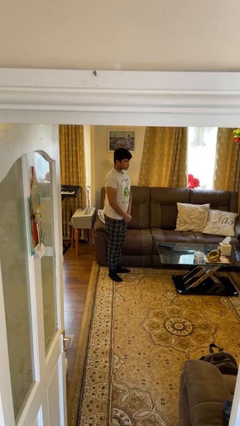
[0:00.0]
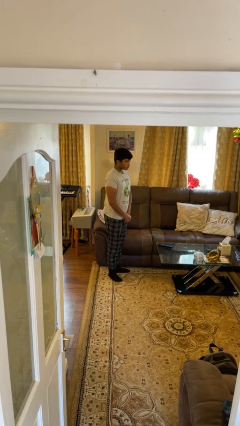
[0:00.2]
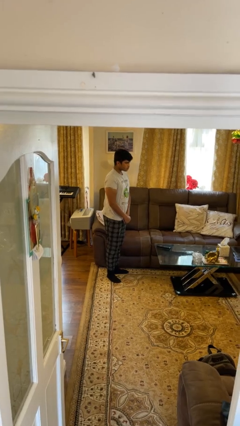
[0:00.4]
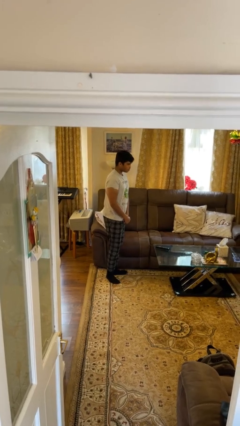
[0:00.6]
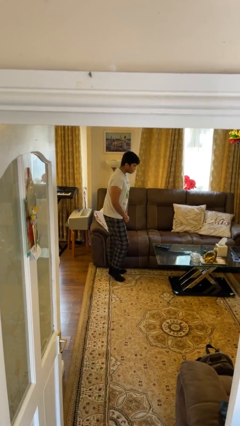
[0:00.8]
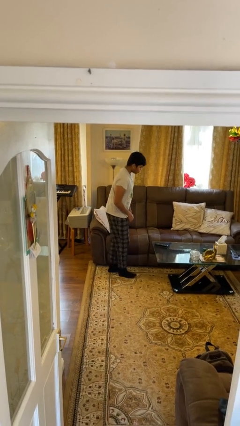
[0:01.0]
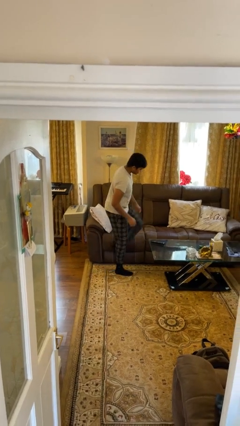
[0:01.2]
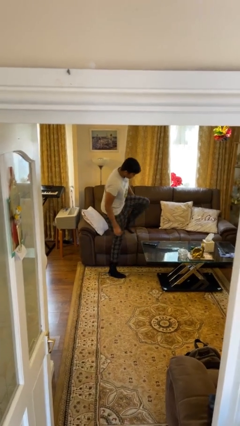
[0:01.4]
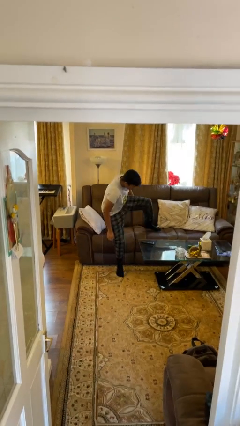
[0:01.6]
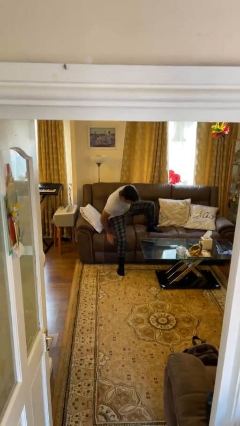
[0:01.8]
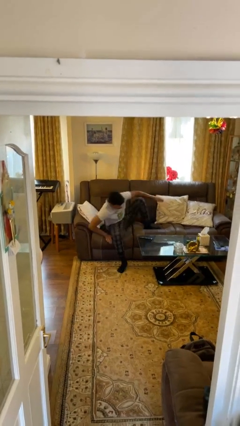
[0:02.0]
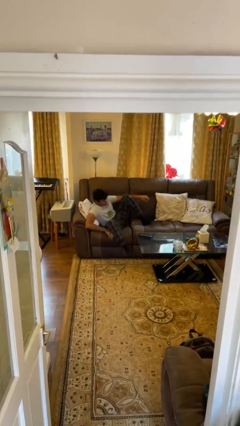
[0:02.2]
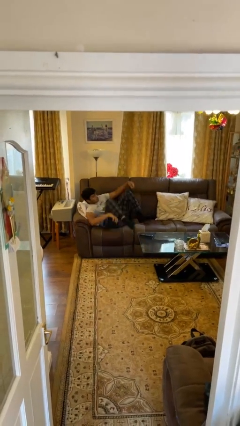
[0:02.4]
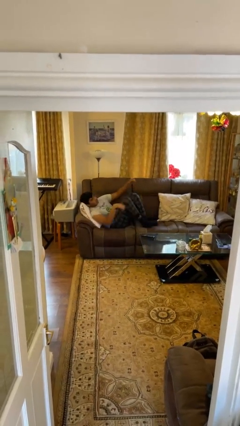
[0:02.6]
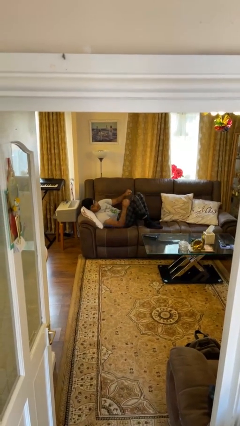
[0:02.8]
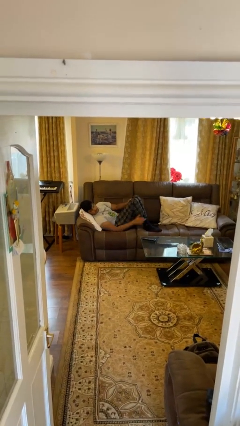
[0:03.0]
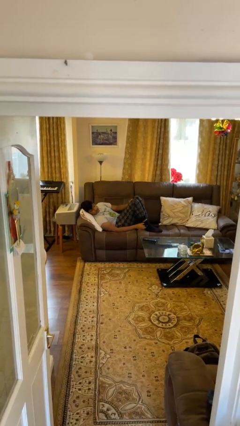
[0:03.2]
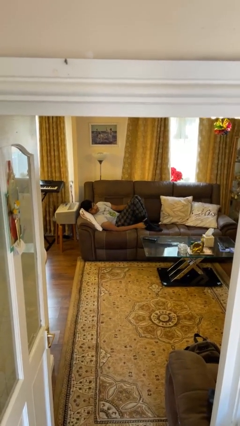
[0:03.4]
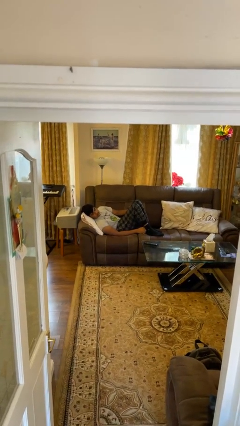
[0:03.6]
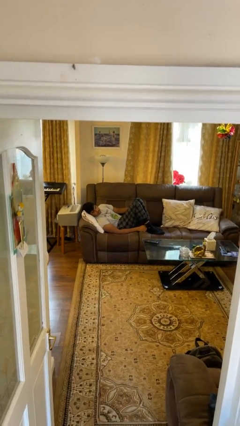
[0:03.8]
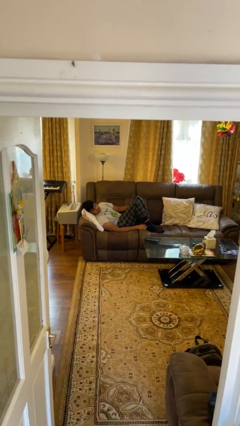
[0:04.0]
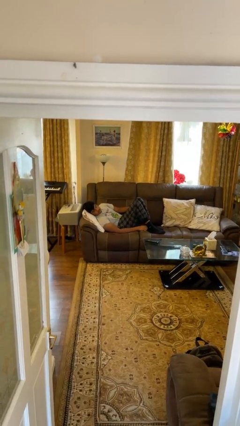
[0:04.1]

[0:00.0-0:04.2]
person lies down on couch

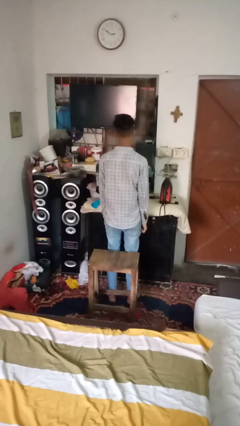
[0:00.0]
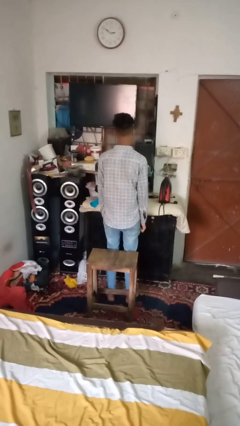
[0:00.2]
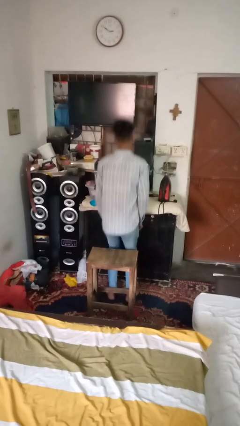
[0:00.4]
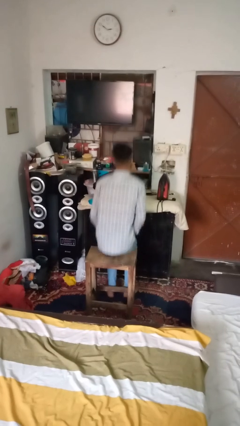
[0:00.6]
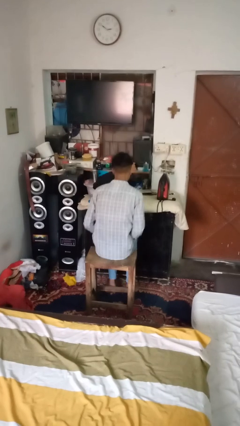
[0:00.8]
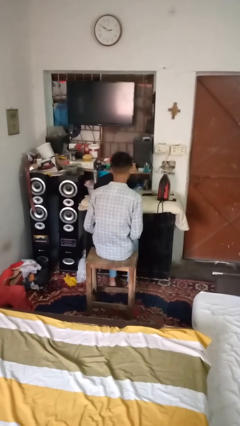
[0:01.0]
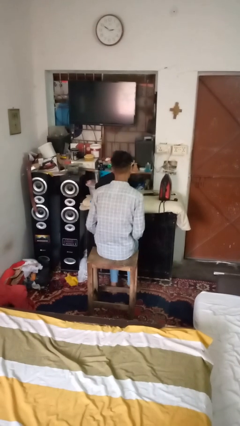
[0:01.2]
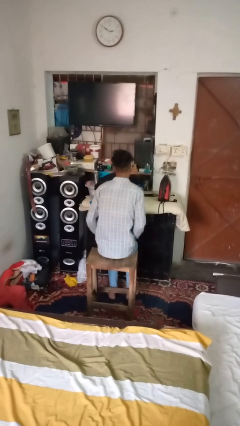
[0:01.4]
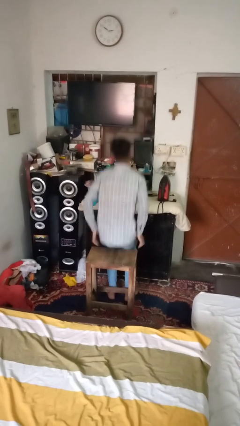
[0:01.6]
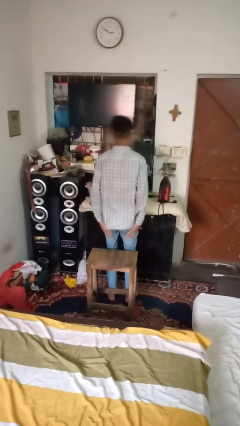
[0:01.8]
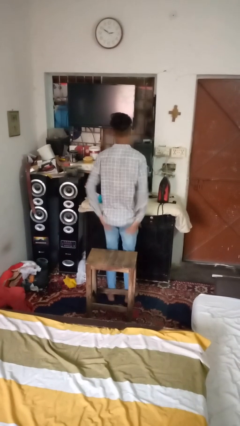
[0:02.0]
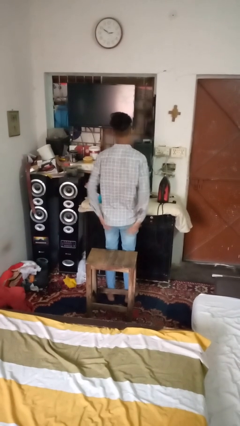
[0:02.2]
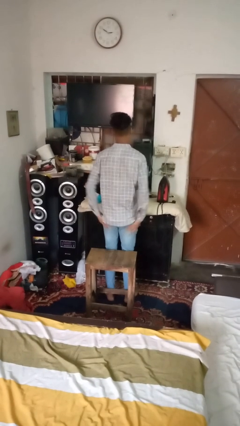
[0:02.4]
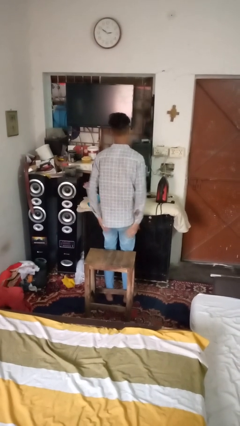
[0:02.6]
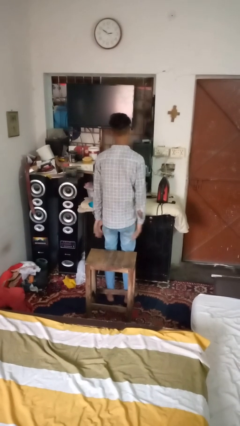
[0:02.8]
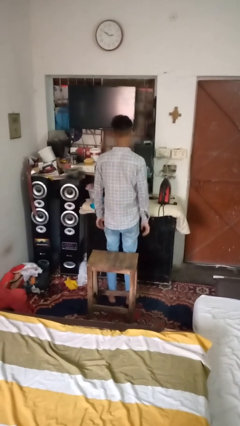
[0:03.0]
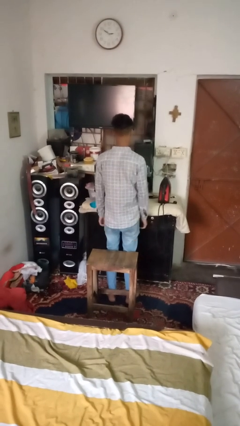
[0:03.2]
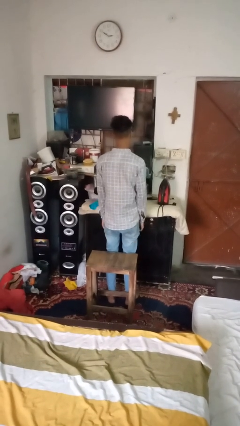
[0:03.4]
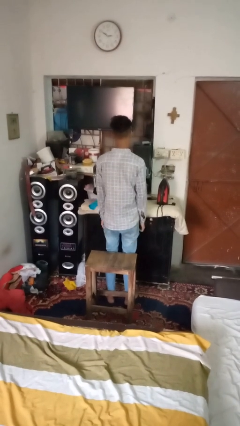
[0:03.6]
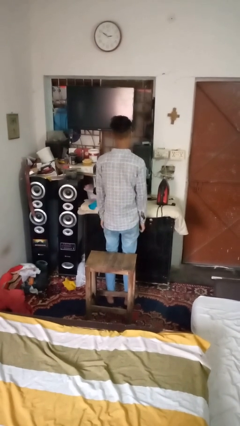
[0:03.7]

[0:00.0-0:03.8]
person bumps into table

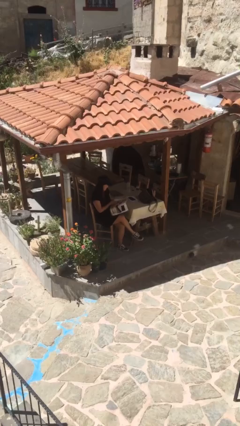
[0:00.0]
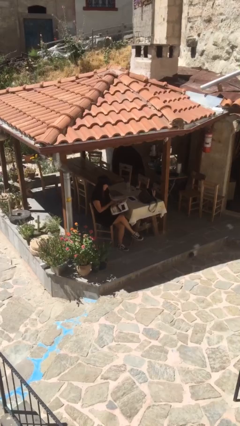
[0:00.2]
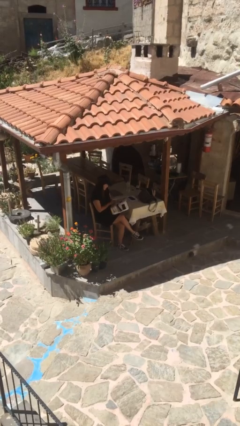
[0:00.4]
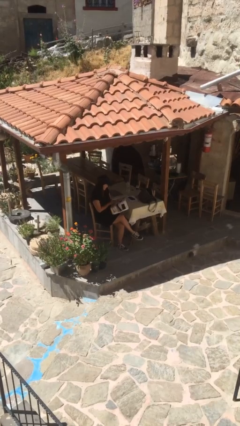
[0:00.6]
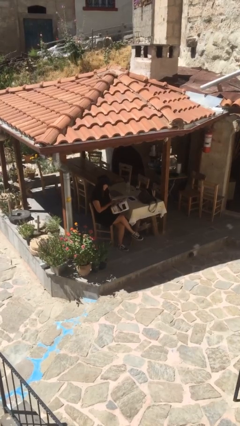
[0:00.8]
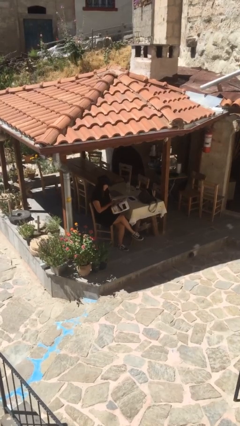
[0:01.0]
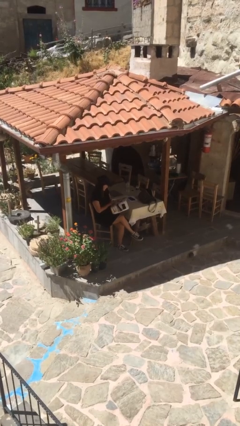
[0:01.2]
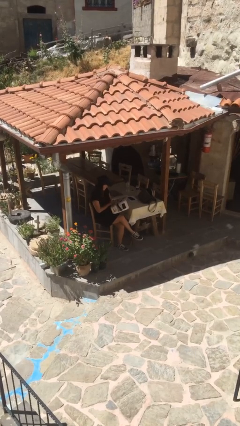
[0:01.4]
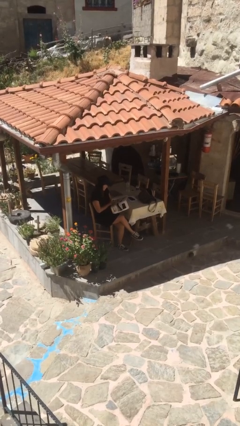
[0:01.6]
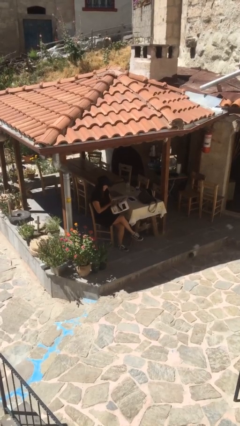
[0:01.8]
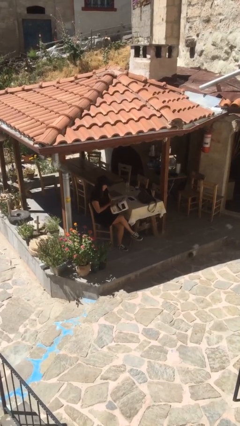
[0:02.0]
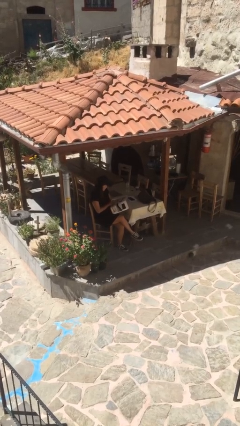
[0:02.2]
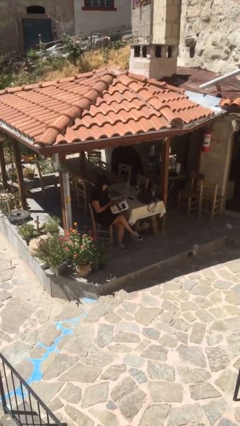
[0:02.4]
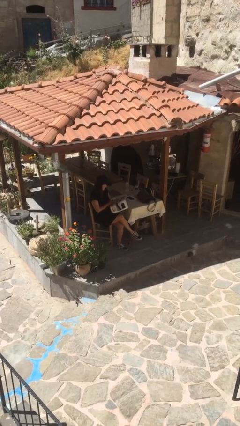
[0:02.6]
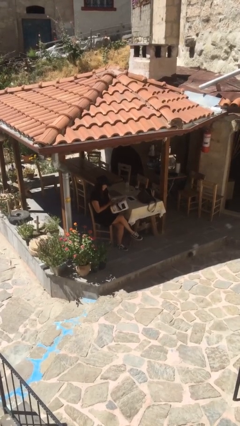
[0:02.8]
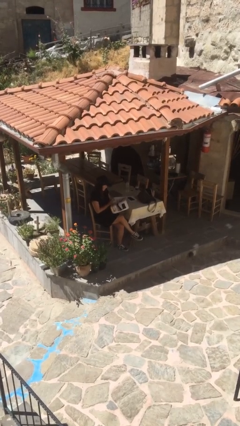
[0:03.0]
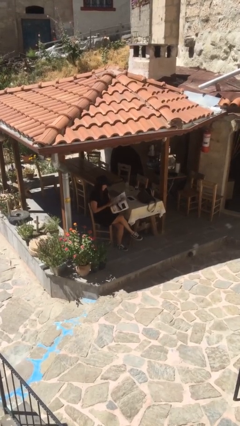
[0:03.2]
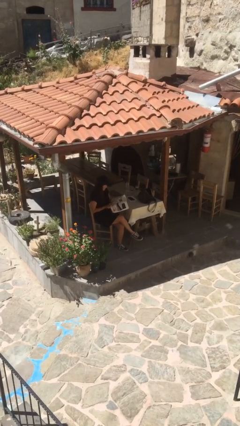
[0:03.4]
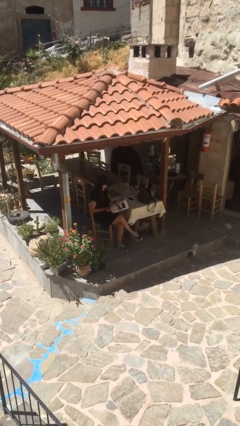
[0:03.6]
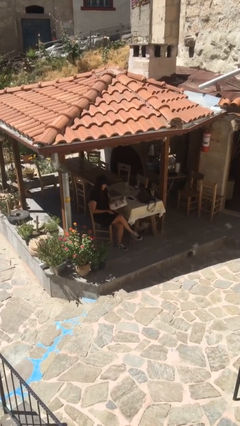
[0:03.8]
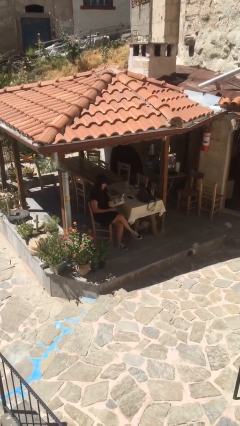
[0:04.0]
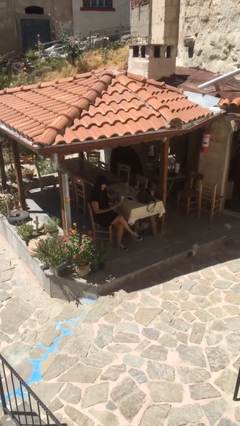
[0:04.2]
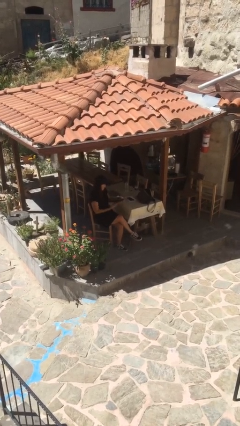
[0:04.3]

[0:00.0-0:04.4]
person reads document

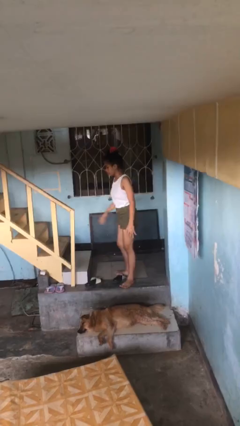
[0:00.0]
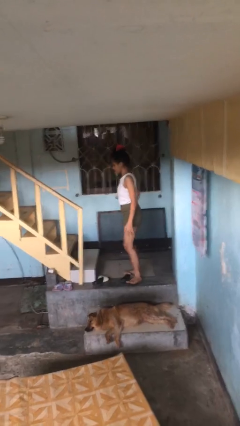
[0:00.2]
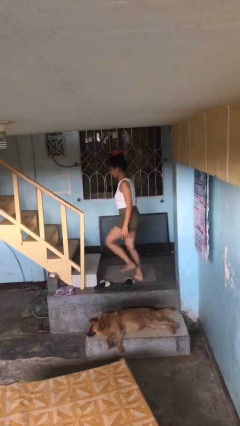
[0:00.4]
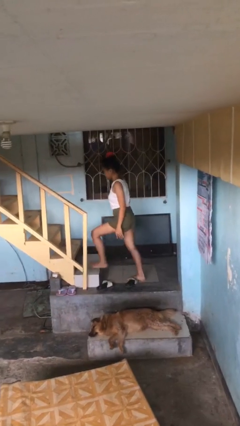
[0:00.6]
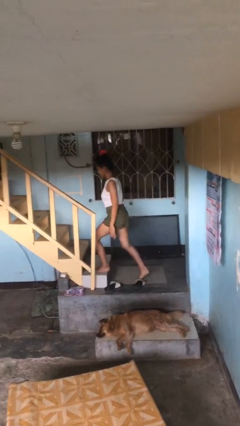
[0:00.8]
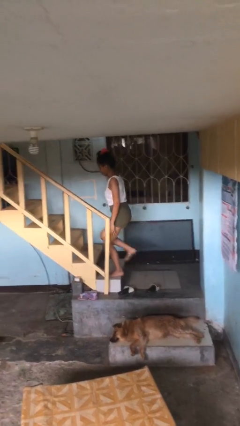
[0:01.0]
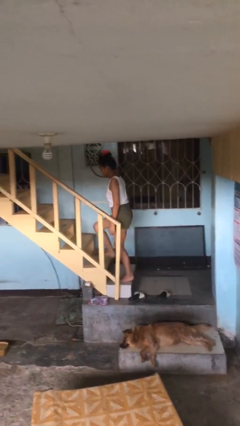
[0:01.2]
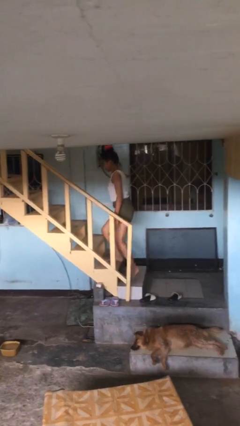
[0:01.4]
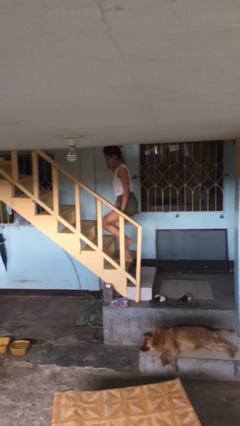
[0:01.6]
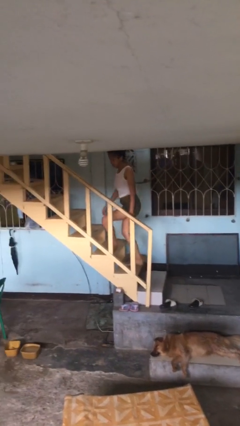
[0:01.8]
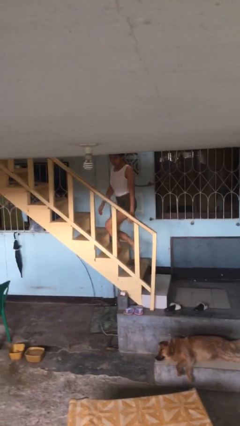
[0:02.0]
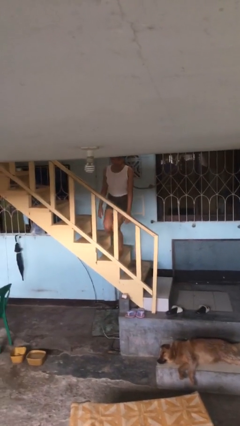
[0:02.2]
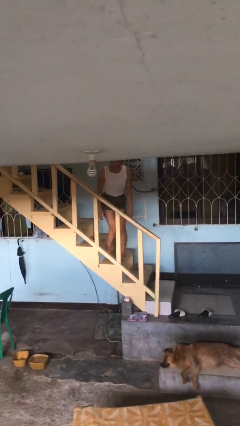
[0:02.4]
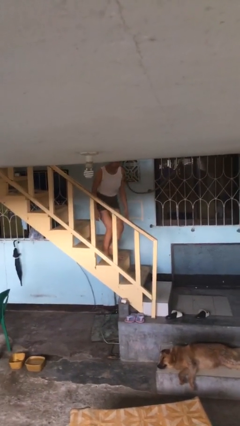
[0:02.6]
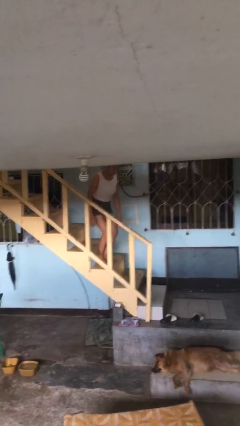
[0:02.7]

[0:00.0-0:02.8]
person climbs up stairs

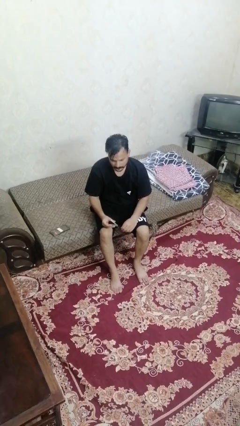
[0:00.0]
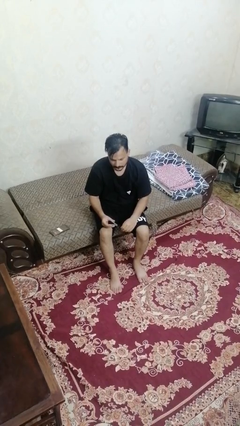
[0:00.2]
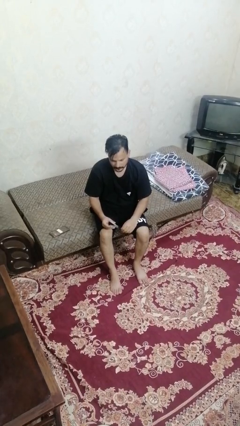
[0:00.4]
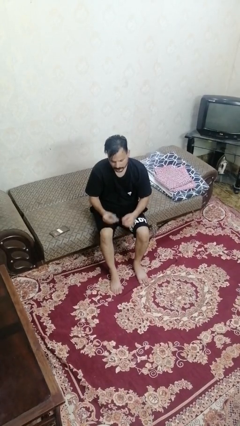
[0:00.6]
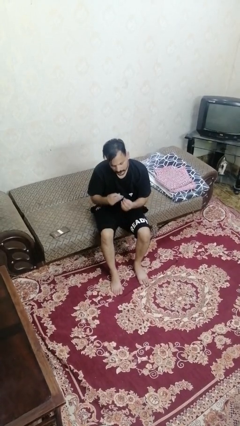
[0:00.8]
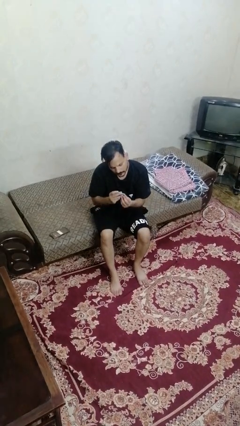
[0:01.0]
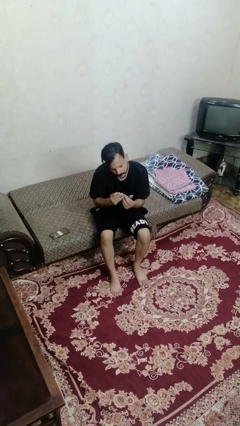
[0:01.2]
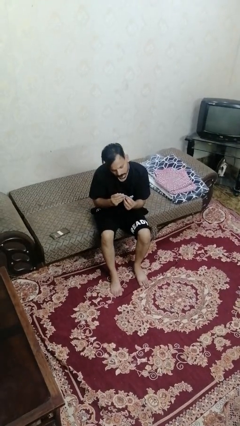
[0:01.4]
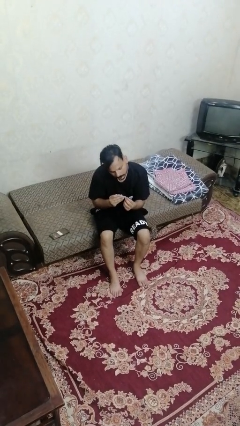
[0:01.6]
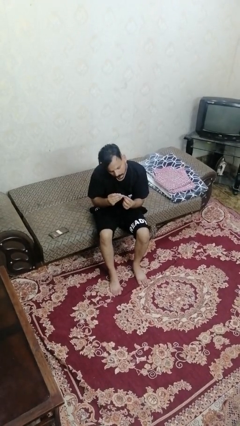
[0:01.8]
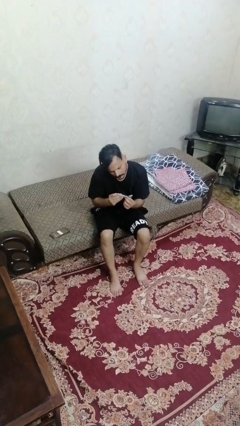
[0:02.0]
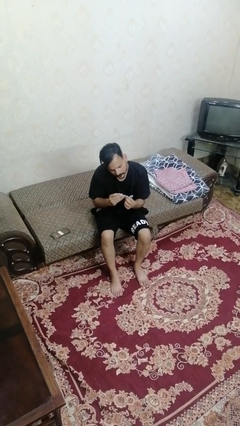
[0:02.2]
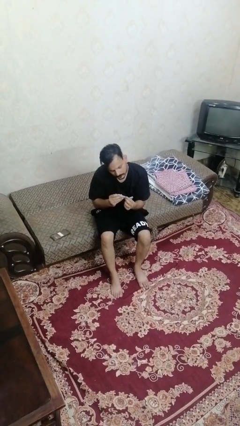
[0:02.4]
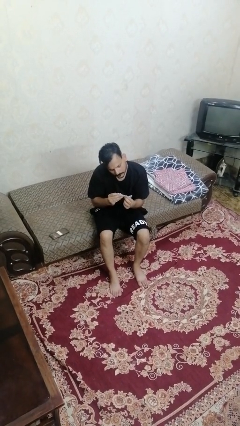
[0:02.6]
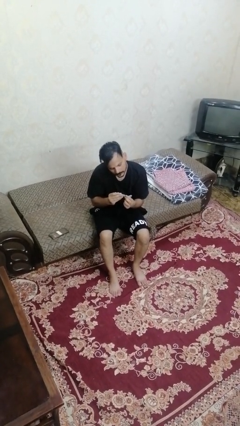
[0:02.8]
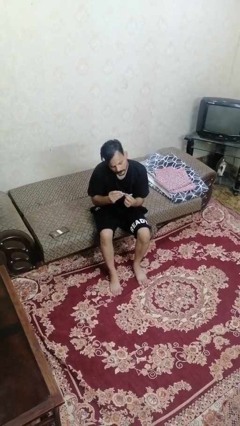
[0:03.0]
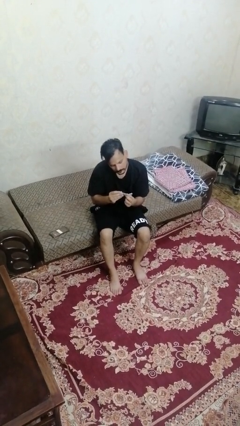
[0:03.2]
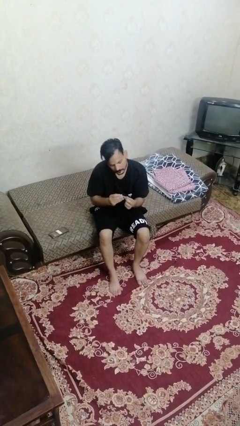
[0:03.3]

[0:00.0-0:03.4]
person clips fingernails
